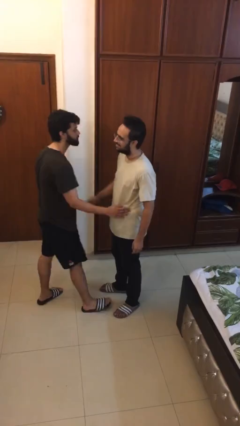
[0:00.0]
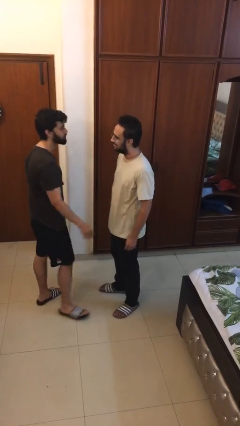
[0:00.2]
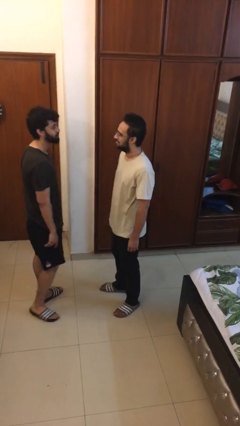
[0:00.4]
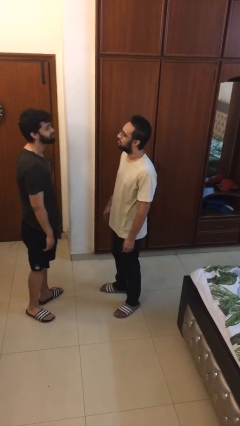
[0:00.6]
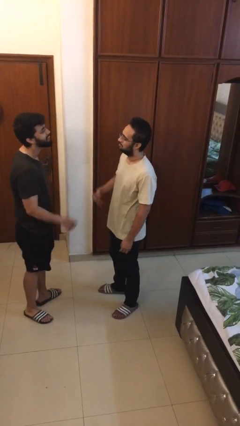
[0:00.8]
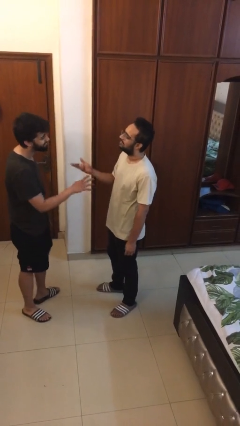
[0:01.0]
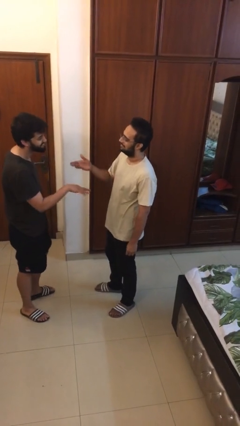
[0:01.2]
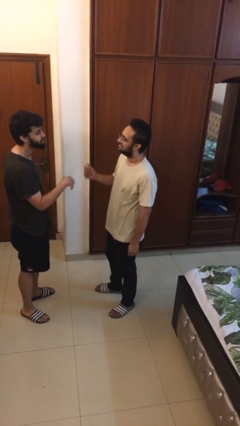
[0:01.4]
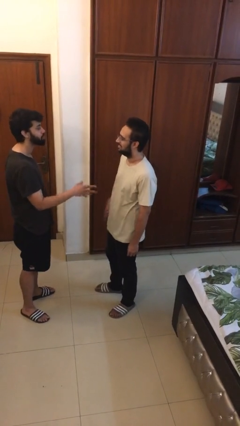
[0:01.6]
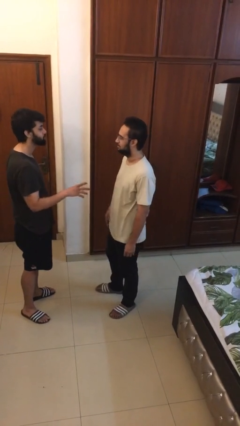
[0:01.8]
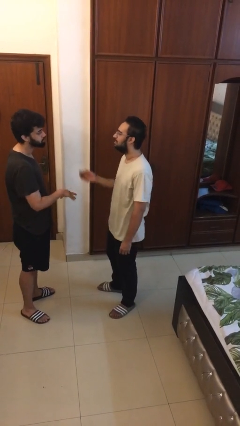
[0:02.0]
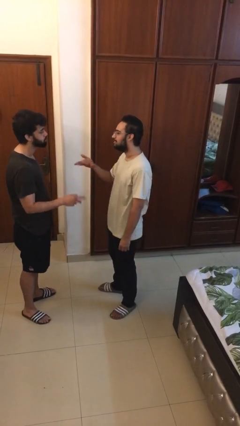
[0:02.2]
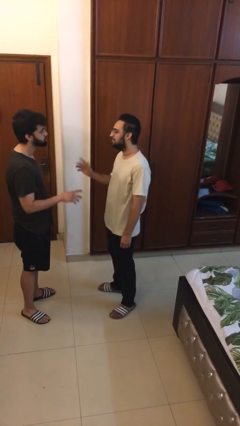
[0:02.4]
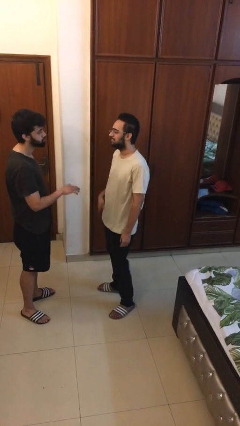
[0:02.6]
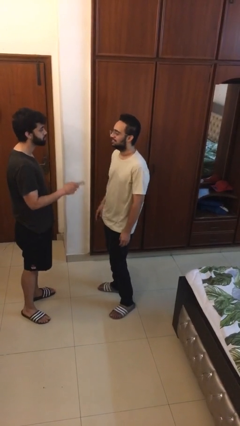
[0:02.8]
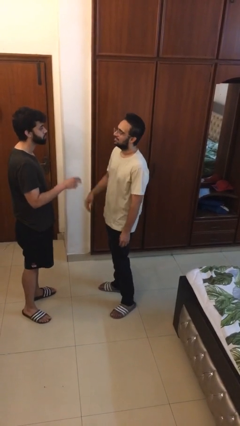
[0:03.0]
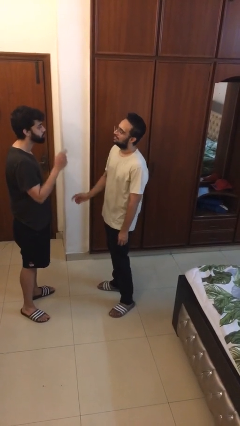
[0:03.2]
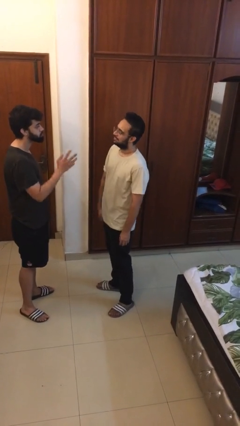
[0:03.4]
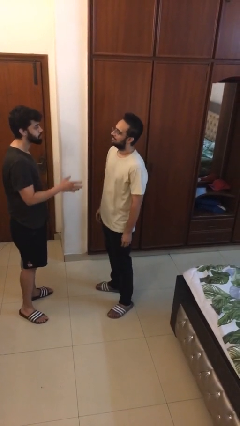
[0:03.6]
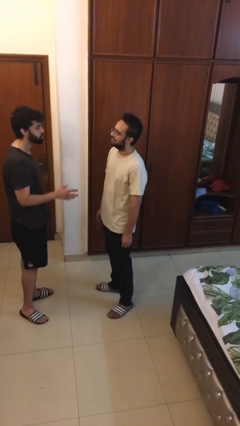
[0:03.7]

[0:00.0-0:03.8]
person talks to person

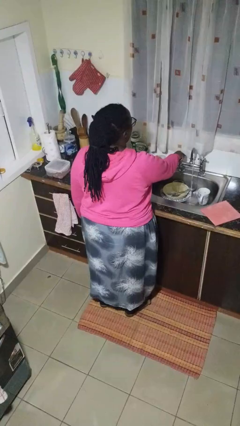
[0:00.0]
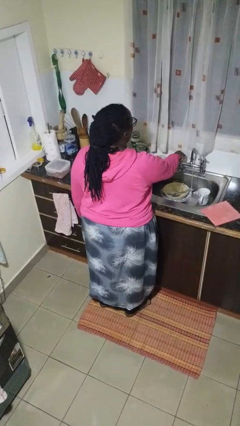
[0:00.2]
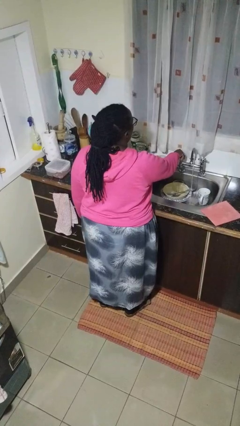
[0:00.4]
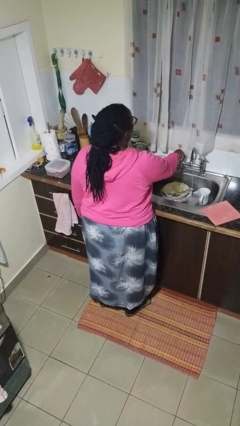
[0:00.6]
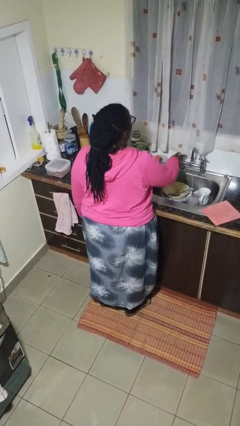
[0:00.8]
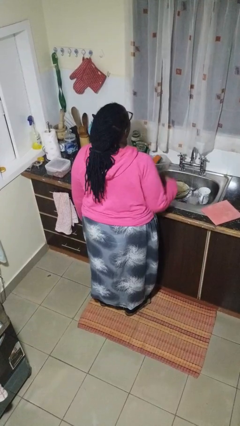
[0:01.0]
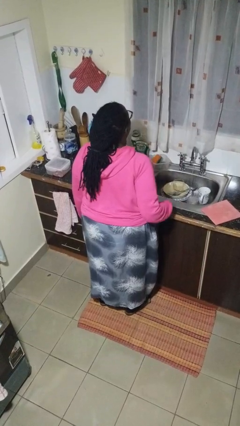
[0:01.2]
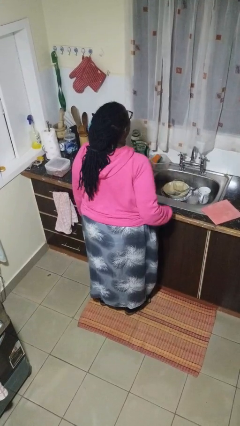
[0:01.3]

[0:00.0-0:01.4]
person turns off faucet

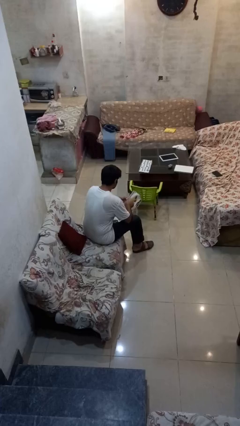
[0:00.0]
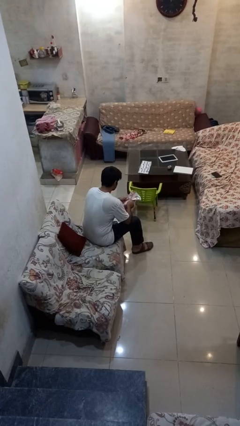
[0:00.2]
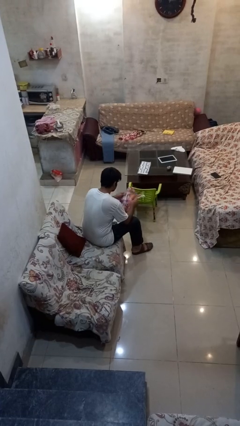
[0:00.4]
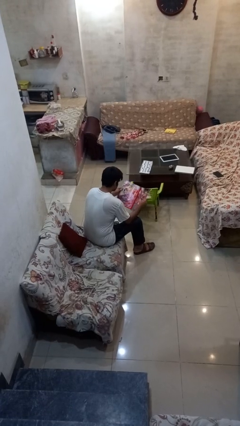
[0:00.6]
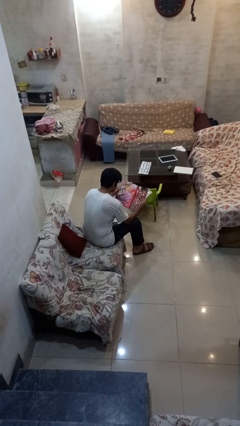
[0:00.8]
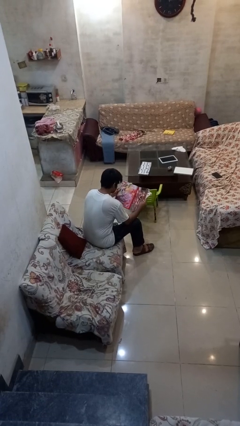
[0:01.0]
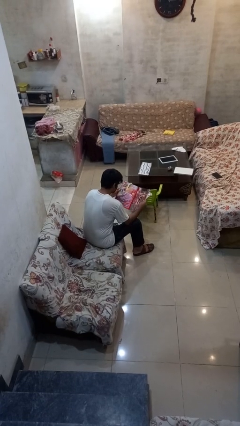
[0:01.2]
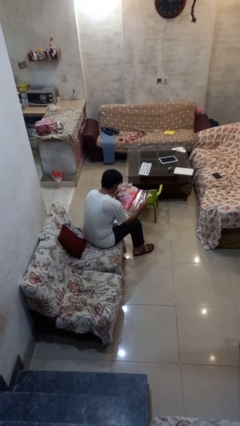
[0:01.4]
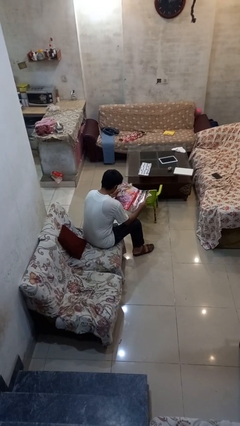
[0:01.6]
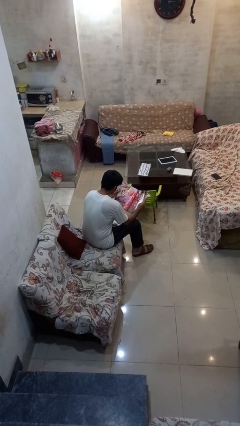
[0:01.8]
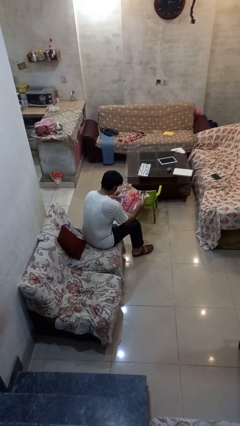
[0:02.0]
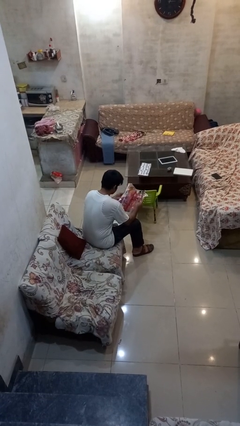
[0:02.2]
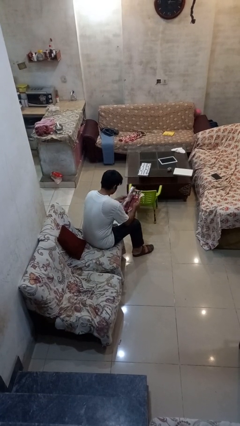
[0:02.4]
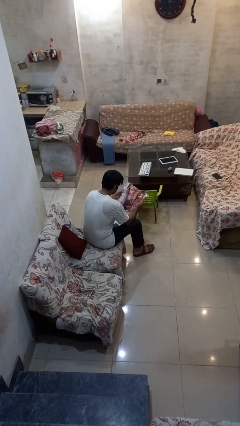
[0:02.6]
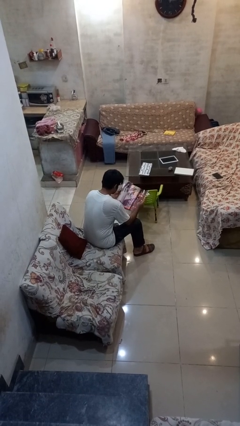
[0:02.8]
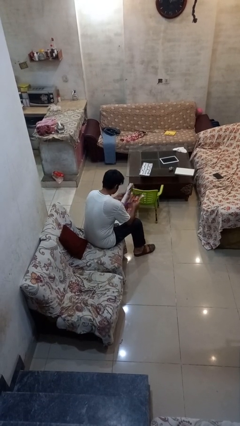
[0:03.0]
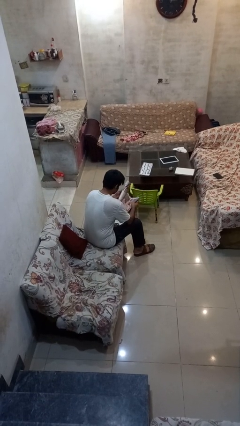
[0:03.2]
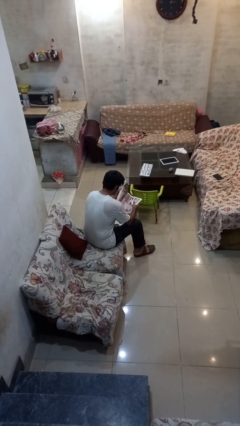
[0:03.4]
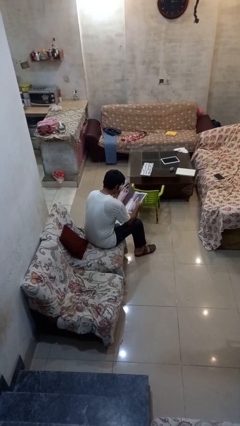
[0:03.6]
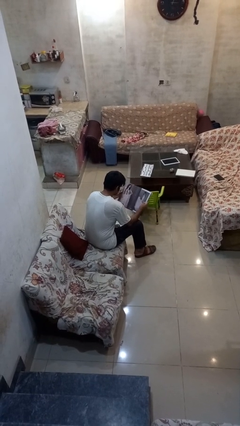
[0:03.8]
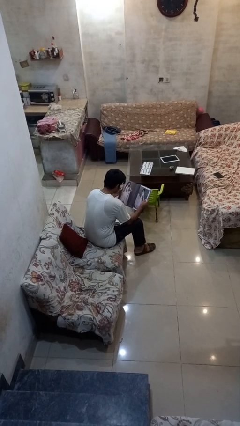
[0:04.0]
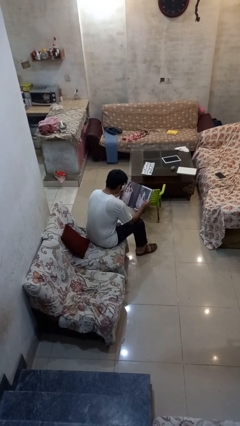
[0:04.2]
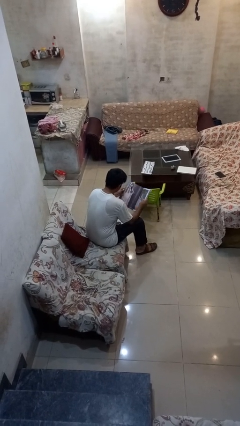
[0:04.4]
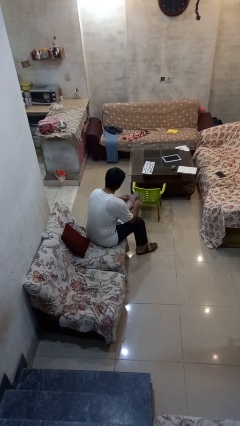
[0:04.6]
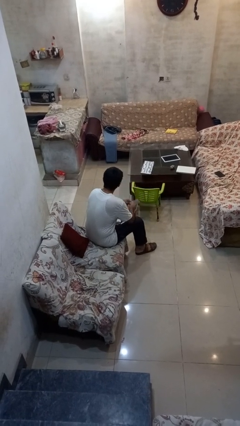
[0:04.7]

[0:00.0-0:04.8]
person reads magazine

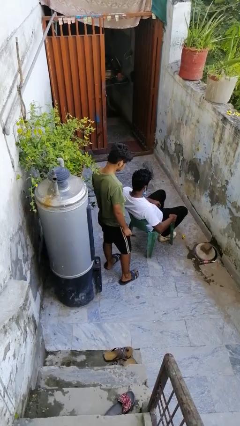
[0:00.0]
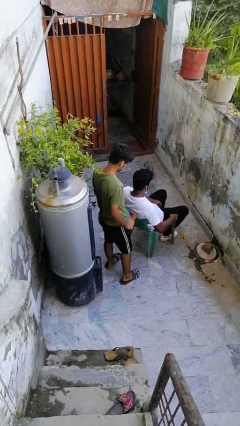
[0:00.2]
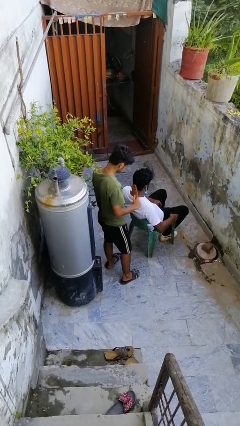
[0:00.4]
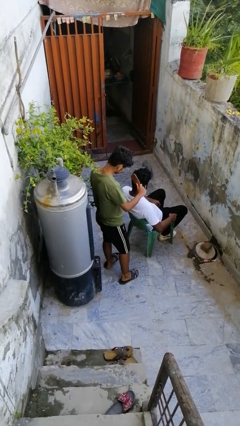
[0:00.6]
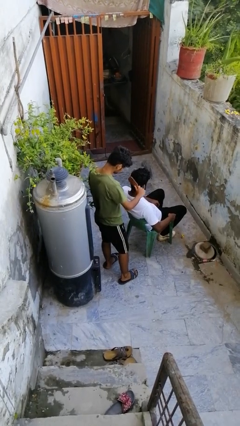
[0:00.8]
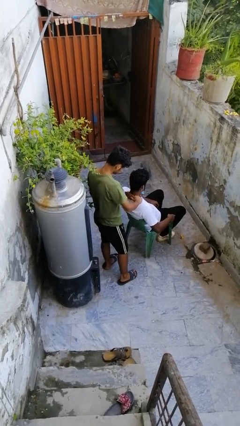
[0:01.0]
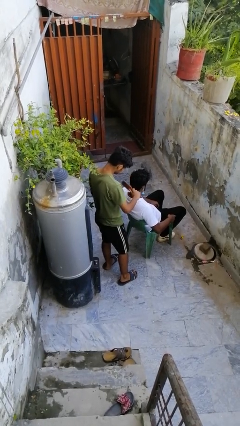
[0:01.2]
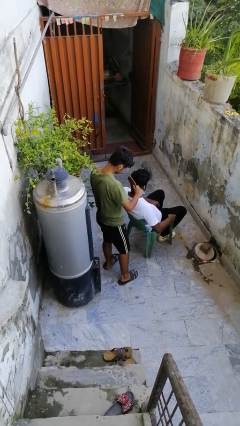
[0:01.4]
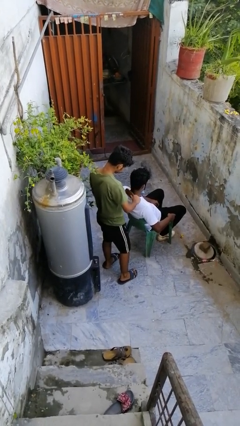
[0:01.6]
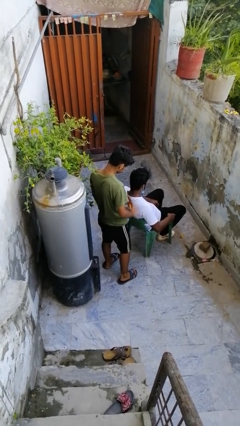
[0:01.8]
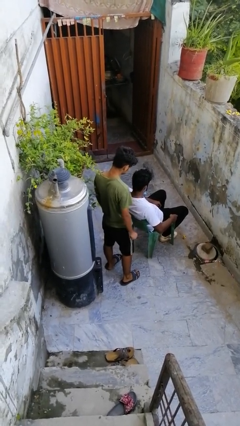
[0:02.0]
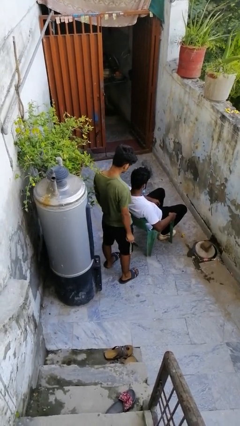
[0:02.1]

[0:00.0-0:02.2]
person brushes hair of person

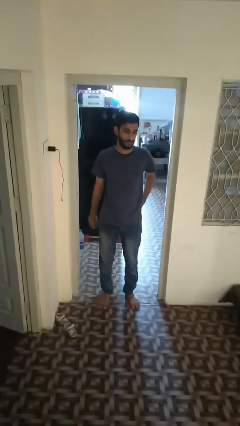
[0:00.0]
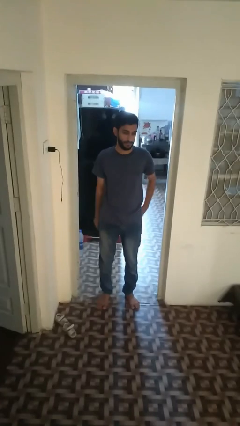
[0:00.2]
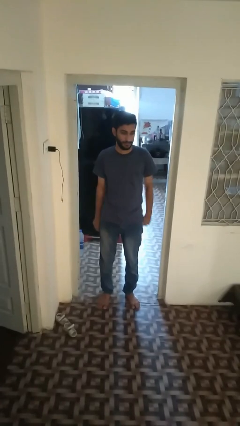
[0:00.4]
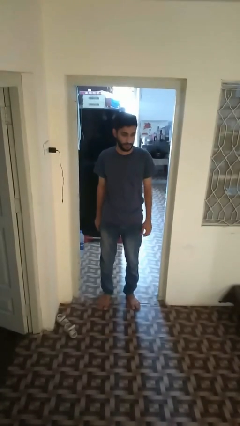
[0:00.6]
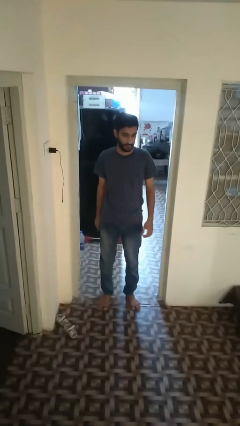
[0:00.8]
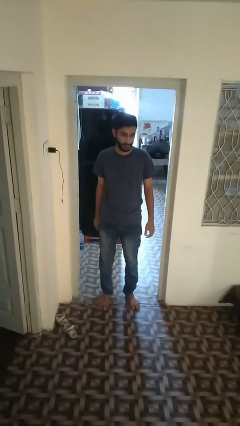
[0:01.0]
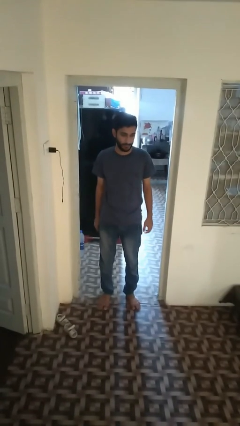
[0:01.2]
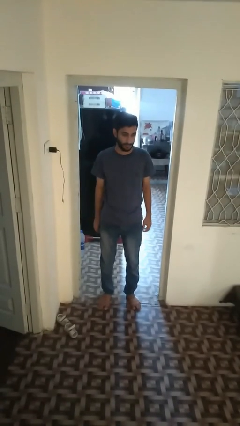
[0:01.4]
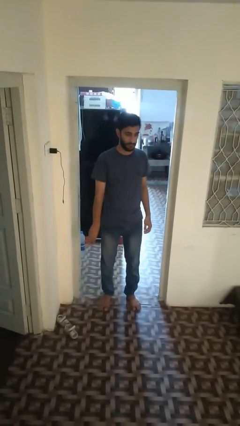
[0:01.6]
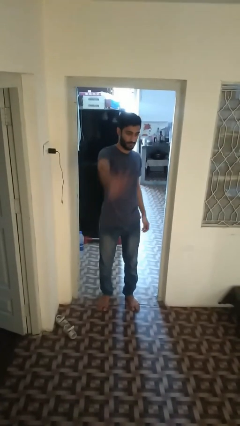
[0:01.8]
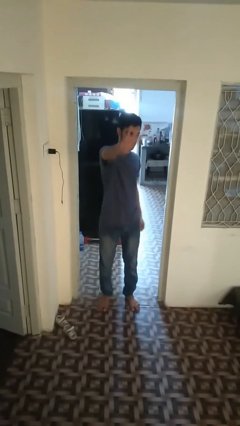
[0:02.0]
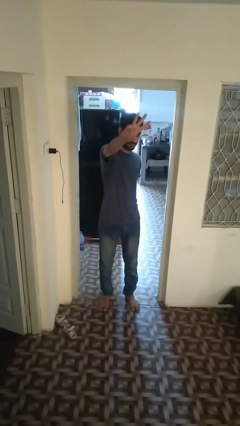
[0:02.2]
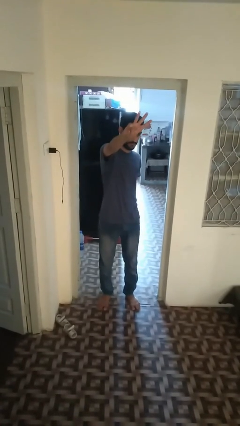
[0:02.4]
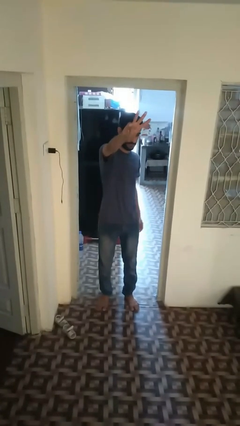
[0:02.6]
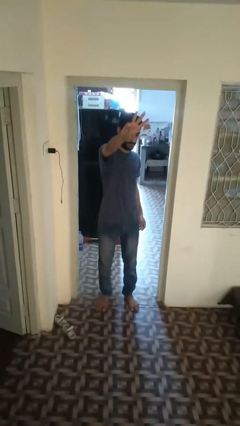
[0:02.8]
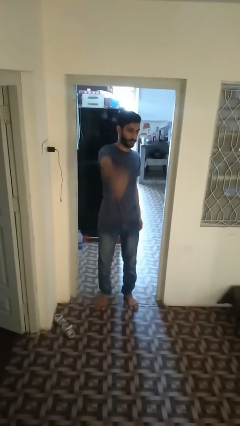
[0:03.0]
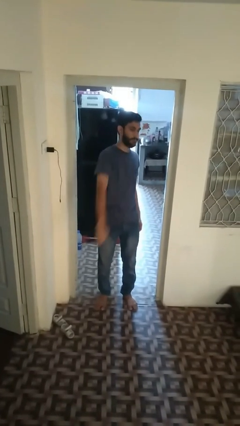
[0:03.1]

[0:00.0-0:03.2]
person gestures number three

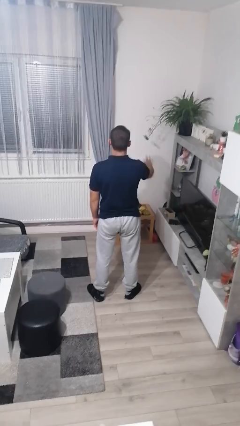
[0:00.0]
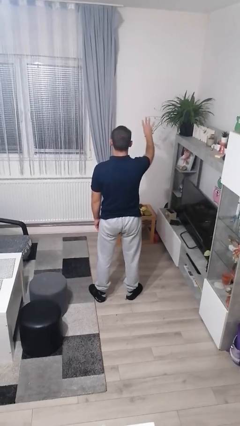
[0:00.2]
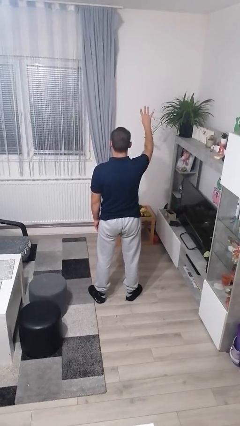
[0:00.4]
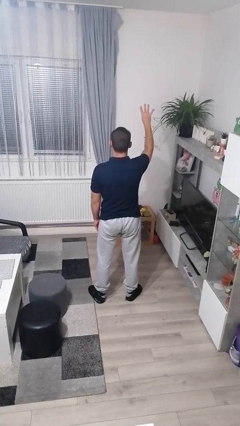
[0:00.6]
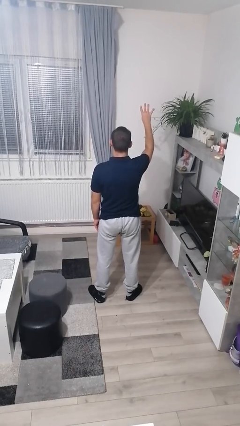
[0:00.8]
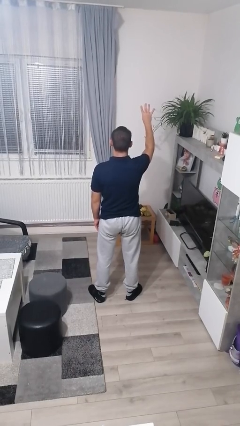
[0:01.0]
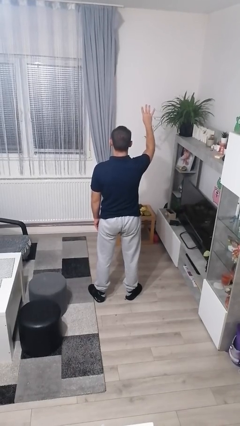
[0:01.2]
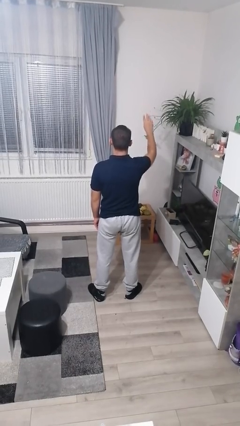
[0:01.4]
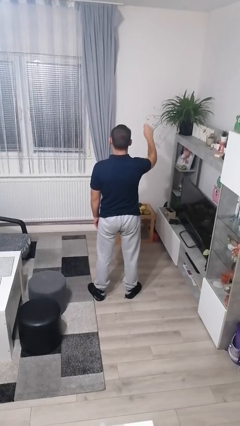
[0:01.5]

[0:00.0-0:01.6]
person gestures number four

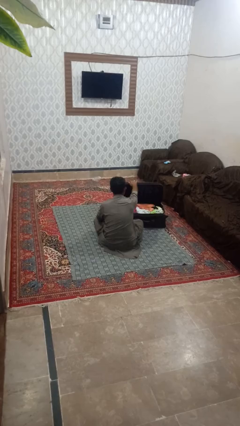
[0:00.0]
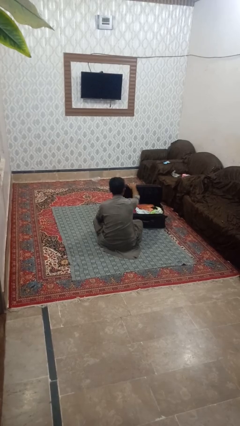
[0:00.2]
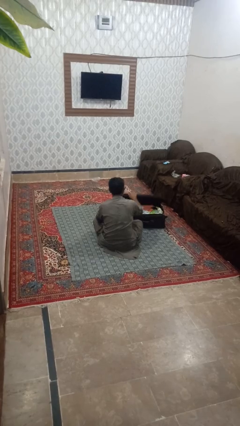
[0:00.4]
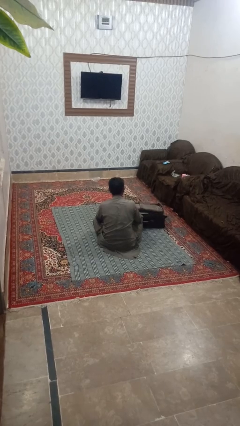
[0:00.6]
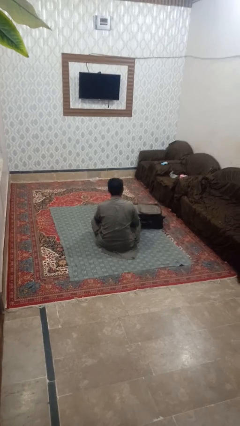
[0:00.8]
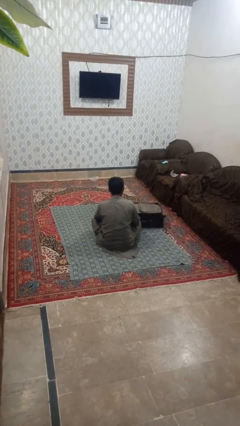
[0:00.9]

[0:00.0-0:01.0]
person closes suitcase
